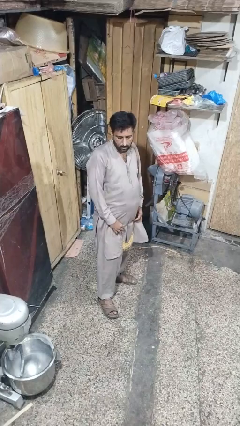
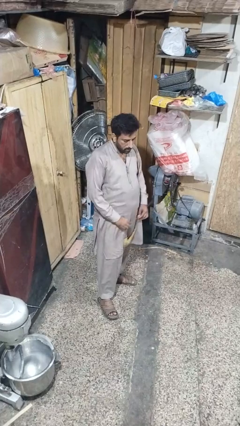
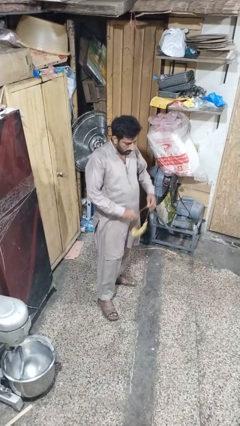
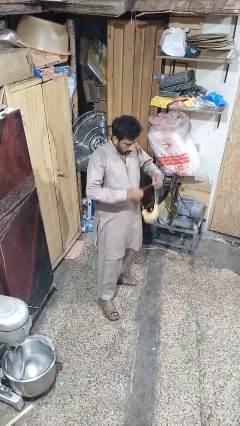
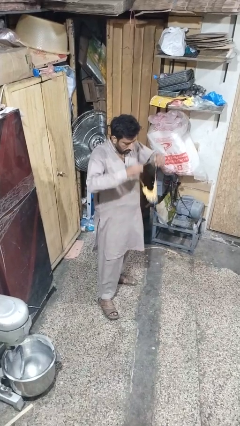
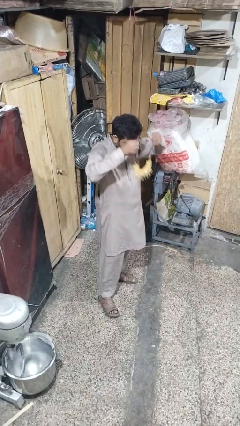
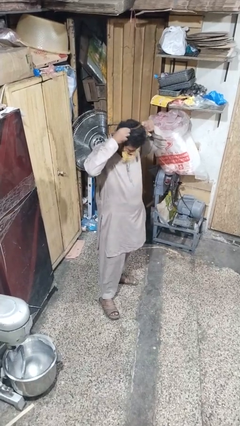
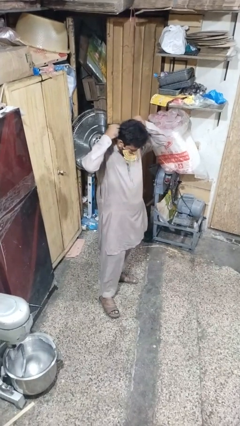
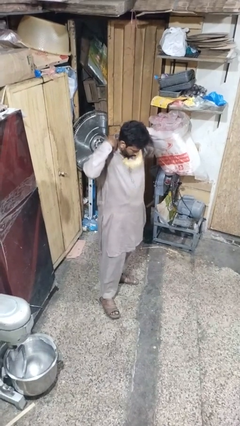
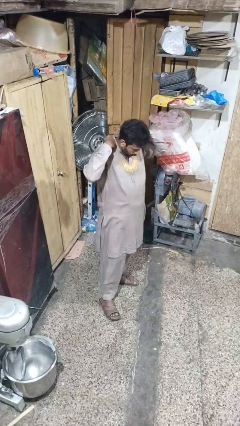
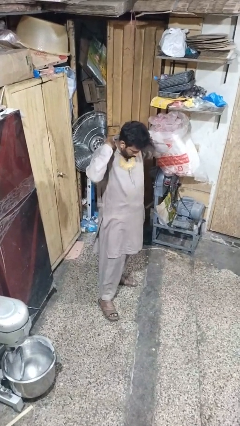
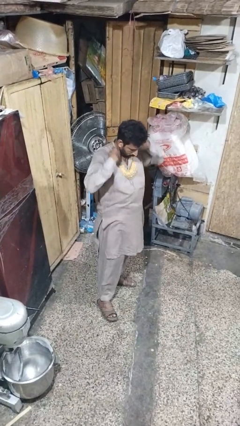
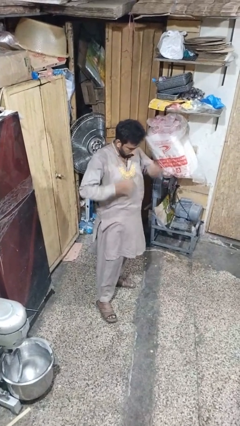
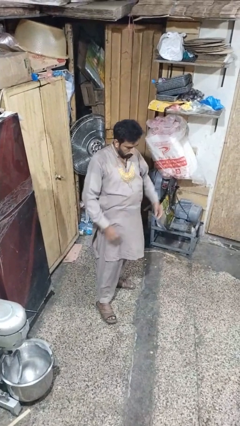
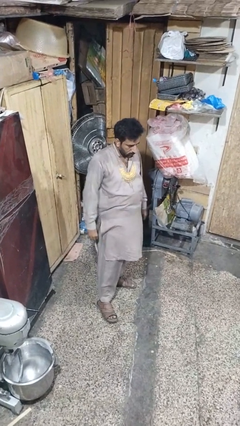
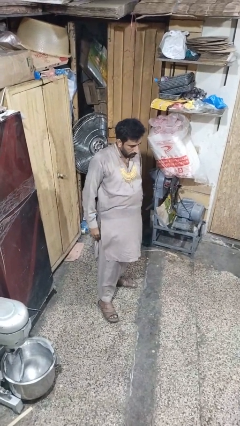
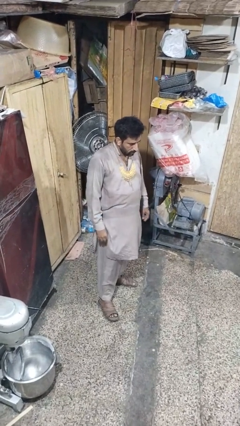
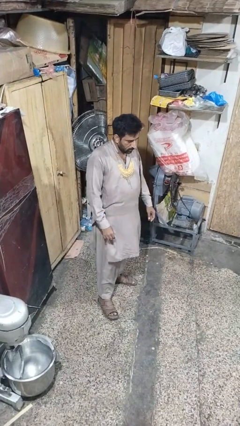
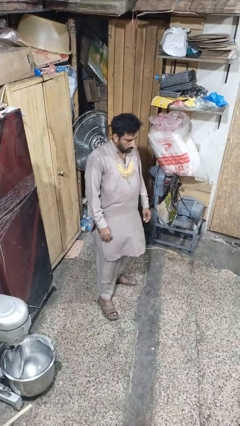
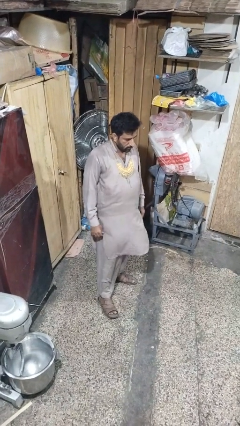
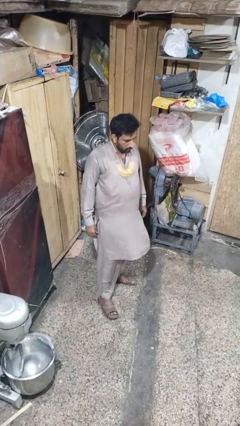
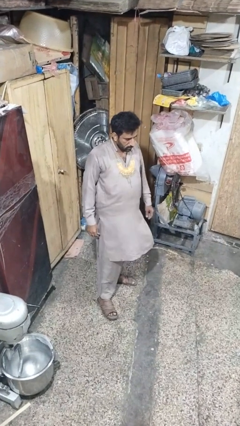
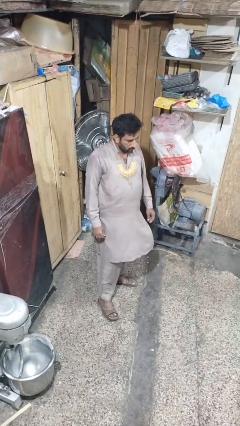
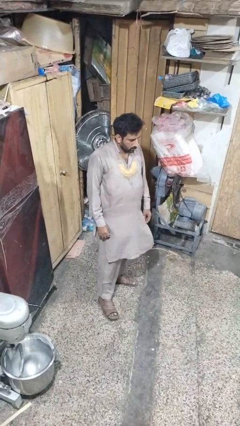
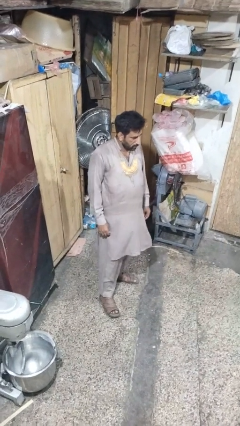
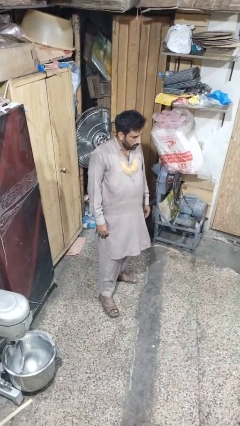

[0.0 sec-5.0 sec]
person puts on necklace

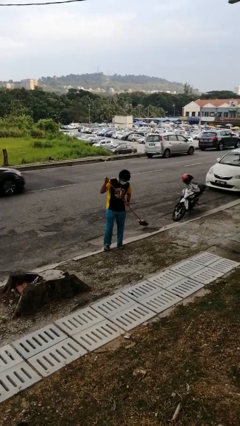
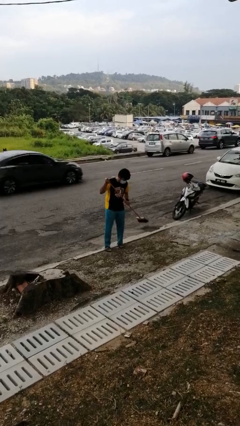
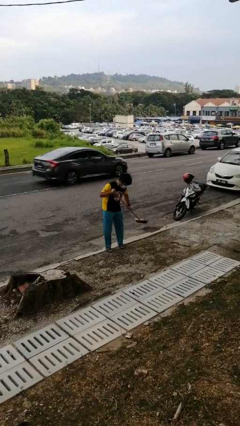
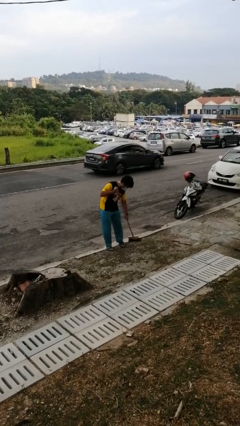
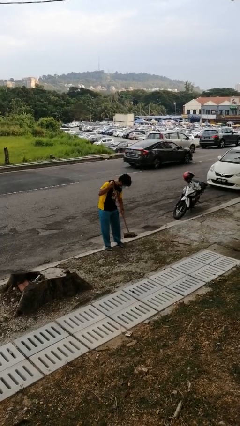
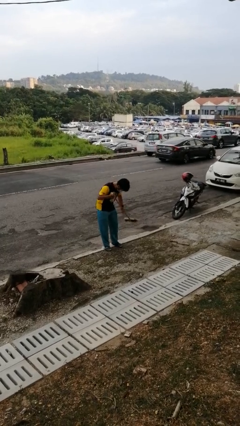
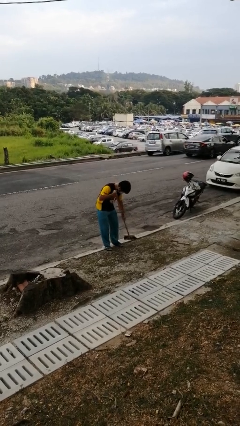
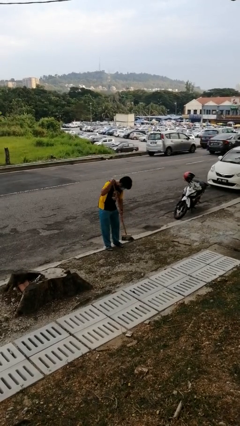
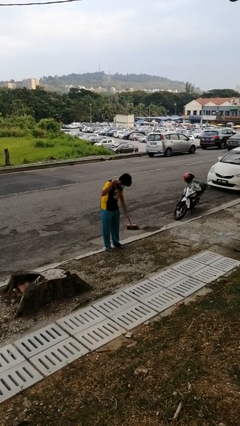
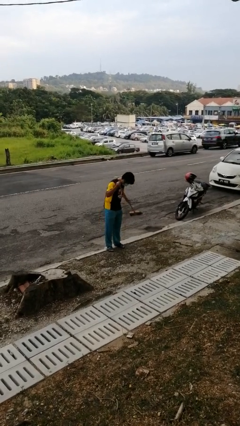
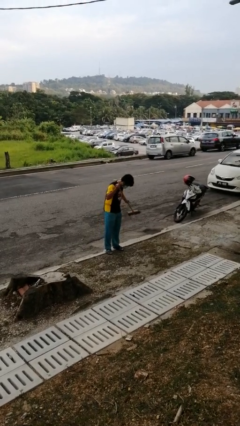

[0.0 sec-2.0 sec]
person sweeps floor

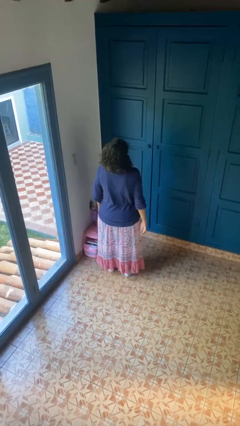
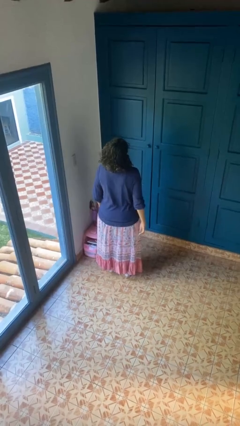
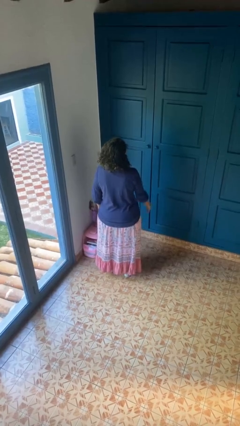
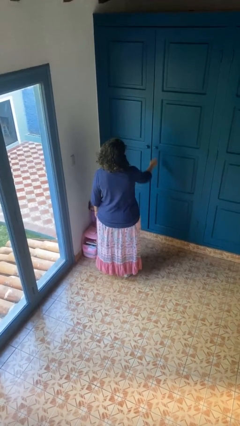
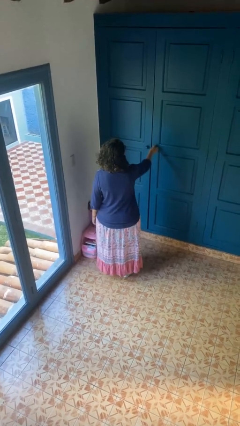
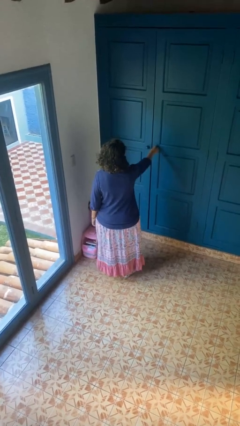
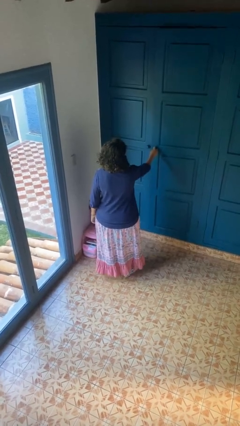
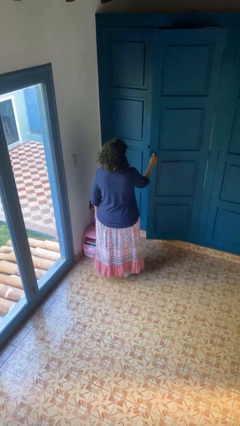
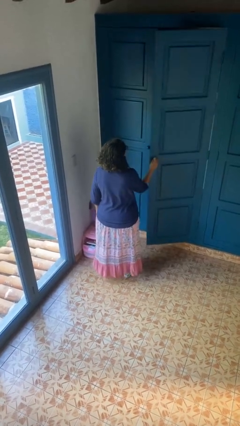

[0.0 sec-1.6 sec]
person opens closet door

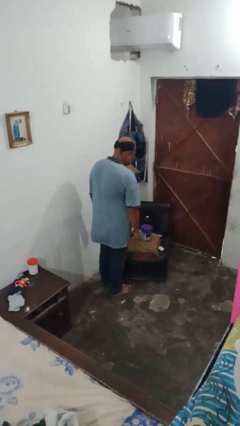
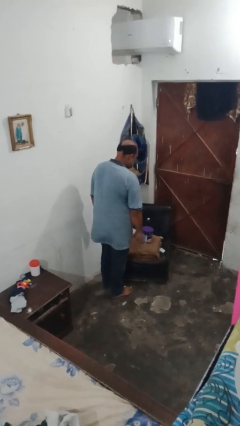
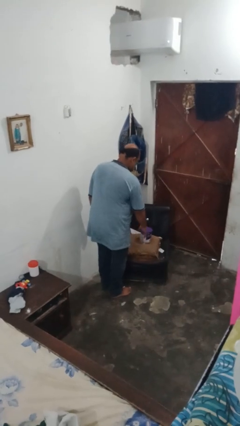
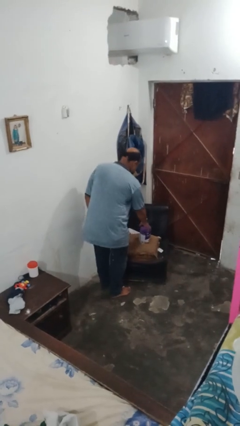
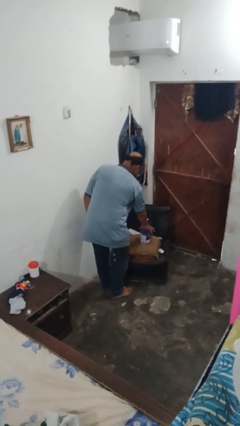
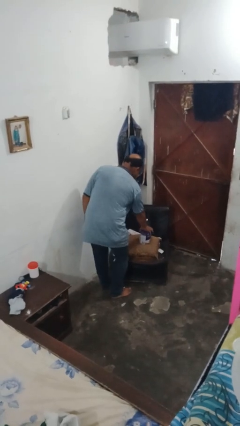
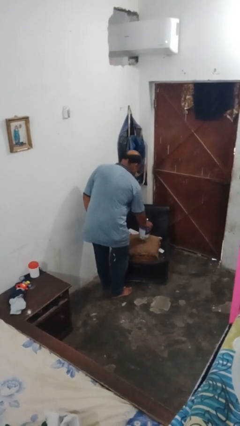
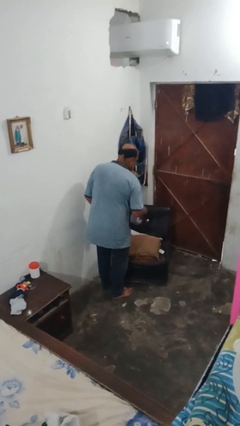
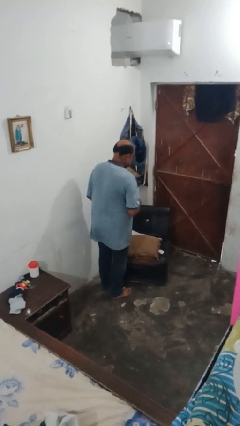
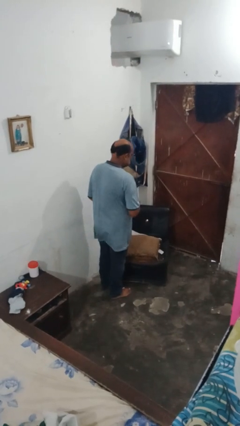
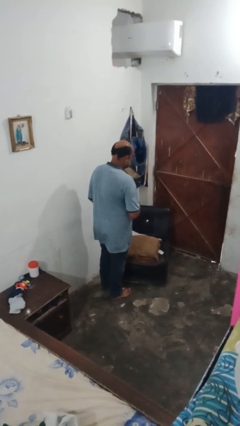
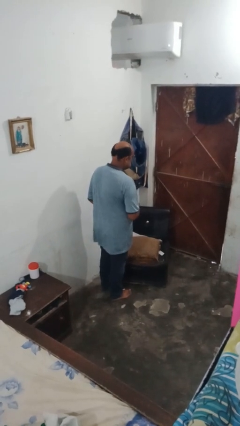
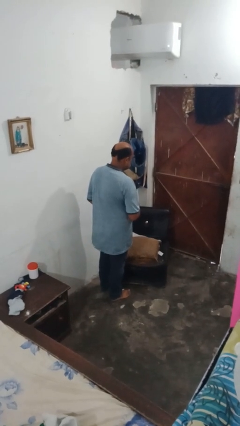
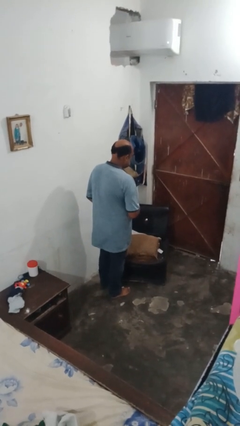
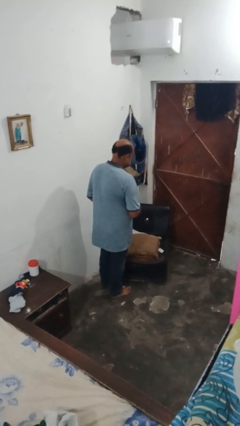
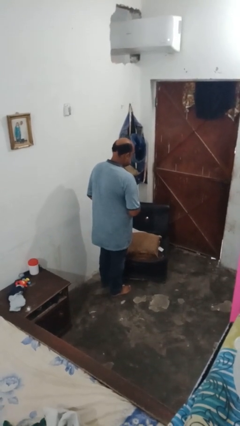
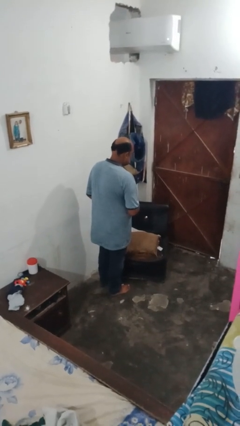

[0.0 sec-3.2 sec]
person picks up object from couch

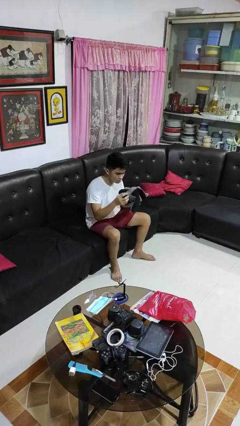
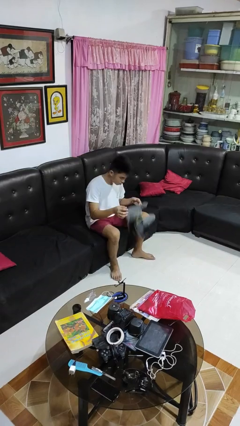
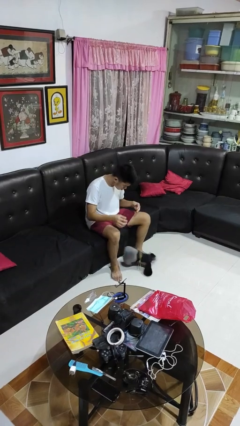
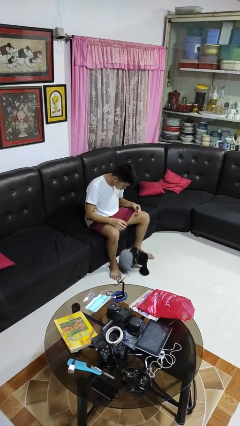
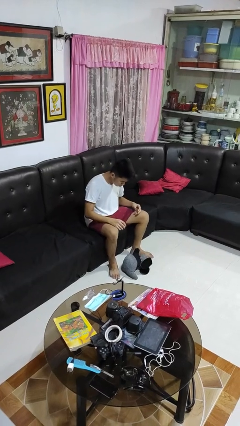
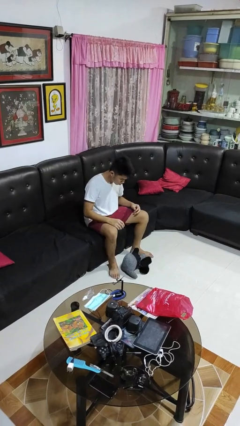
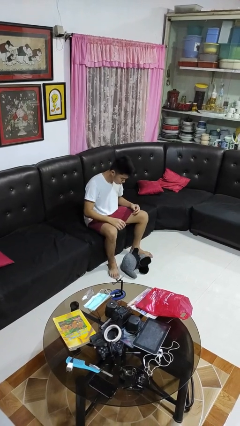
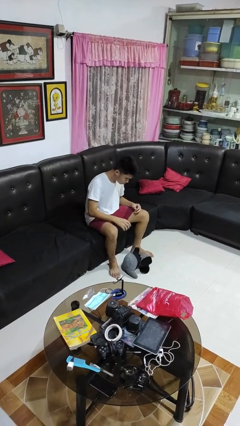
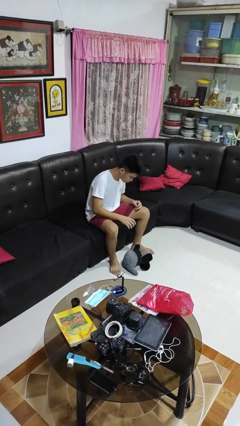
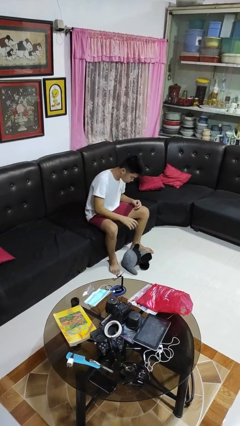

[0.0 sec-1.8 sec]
person drops object

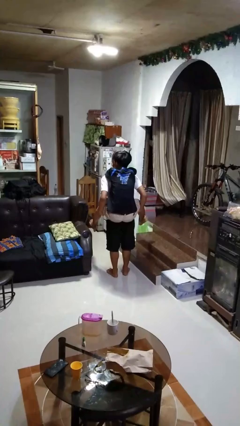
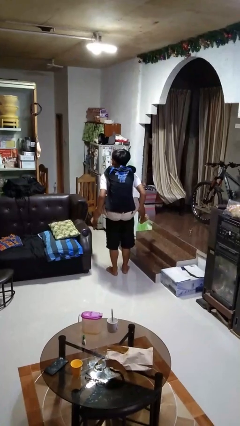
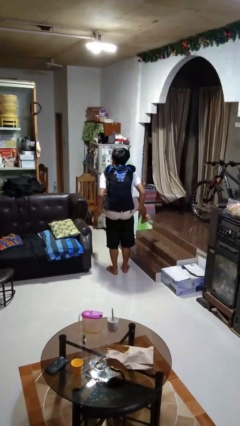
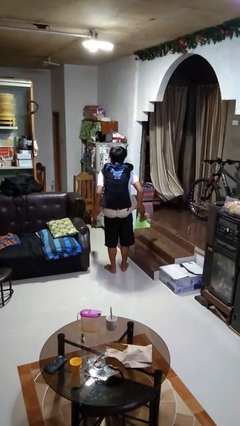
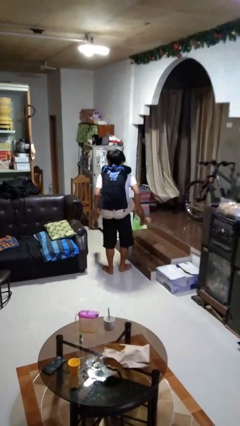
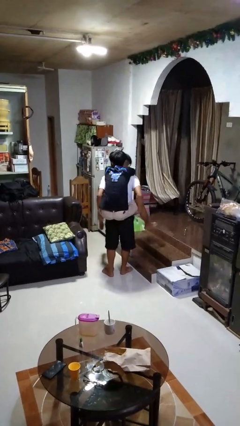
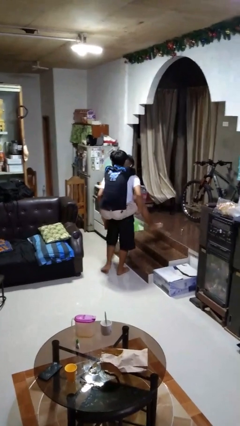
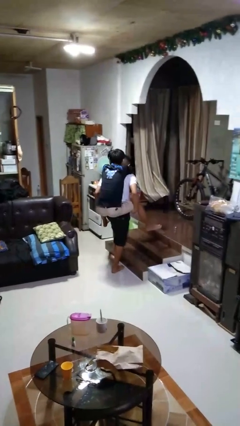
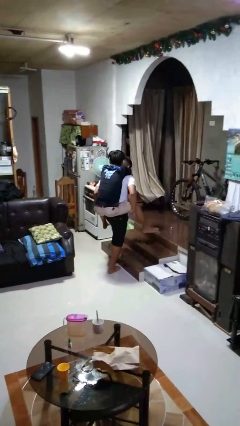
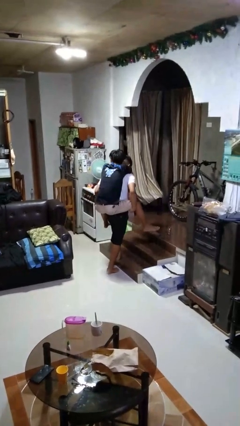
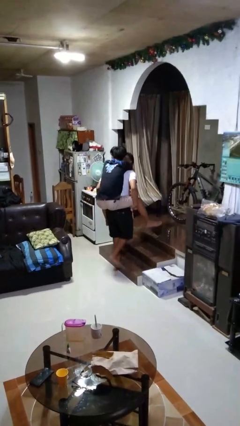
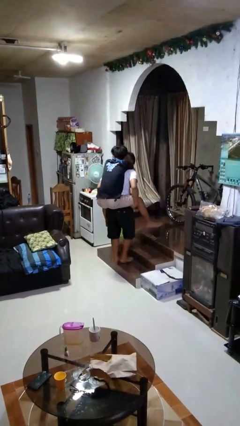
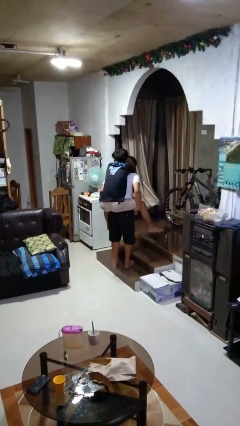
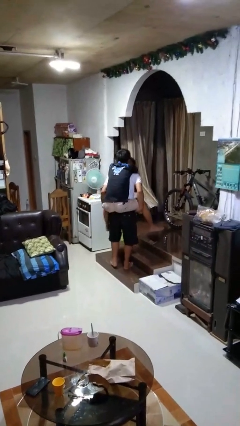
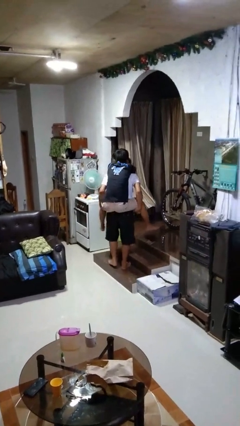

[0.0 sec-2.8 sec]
person carries person on back

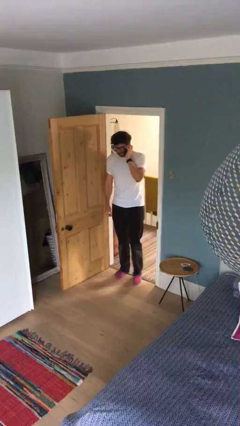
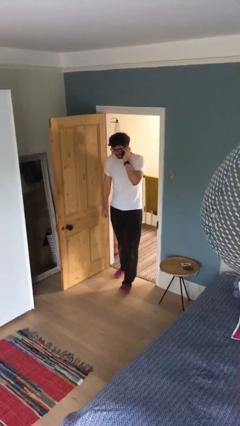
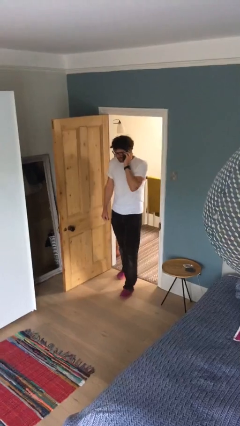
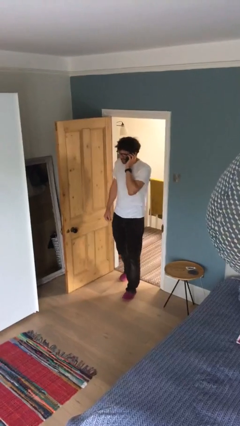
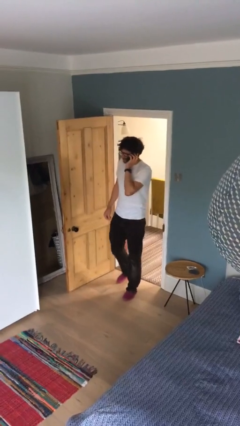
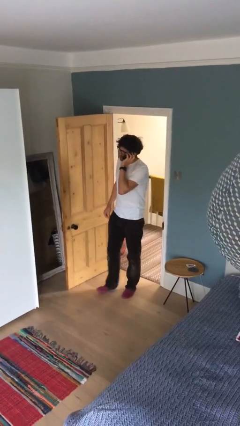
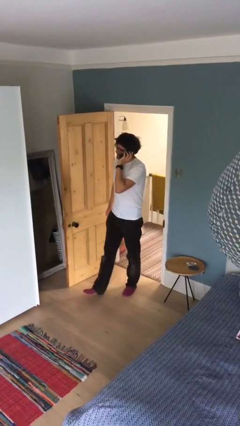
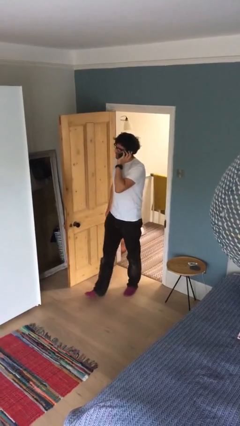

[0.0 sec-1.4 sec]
person enters scene through structure
